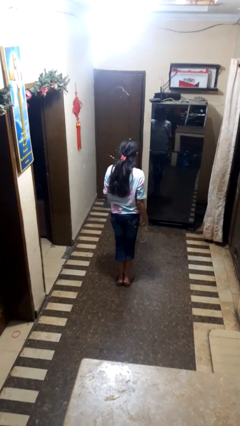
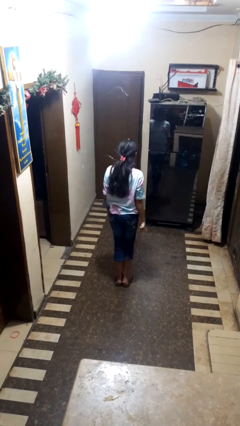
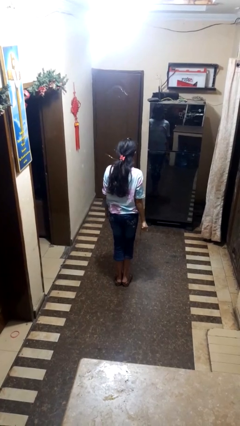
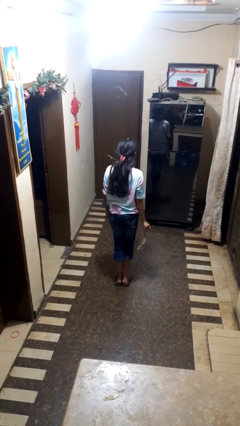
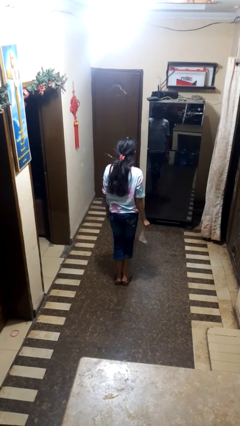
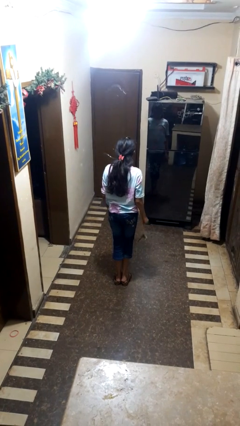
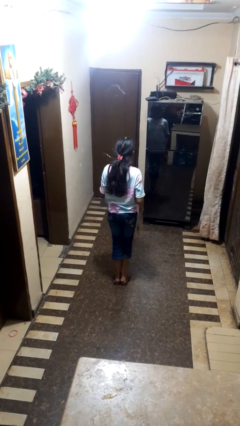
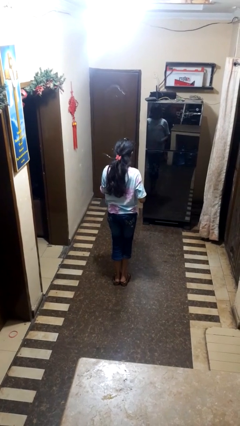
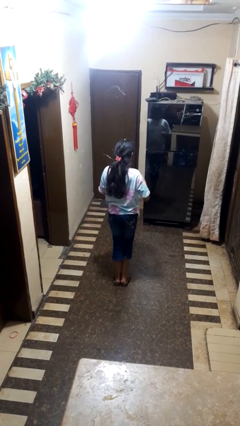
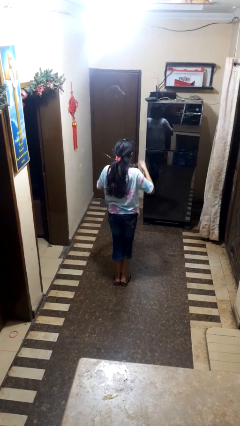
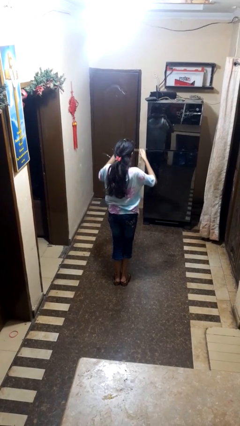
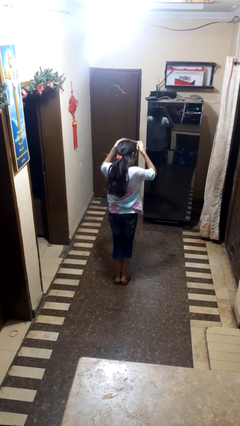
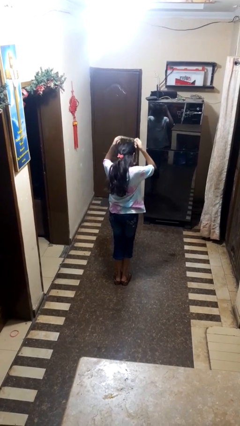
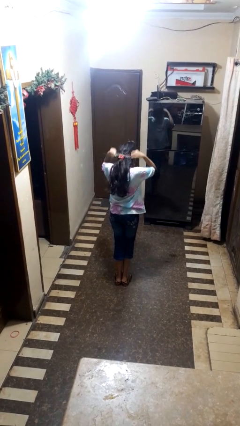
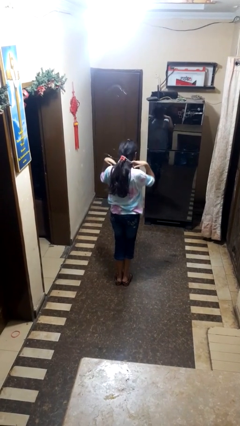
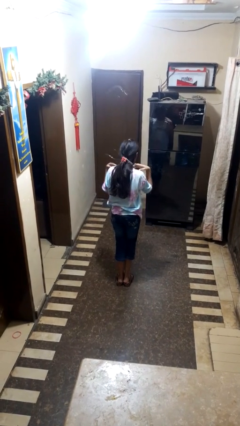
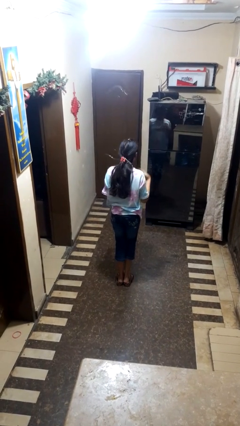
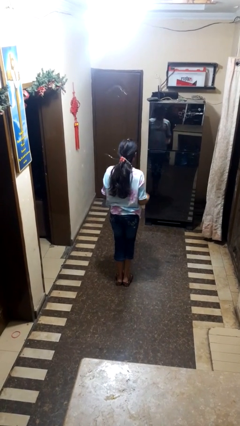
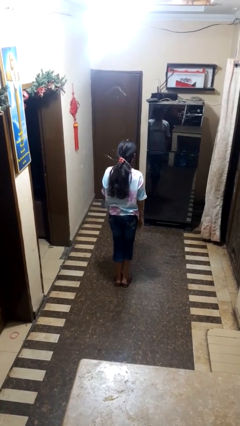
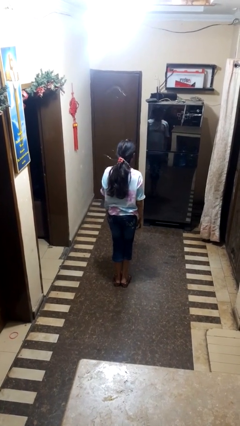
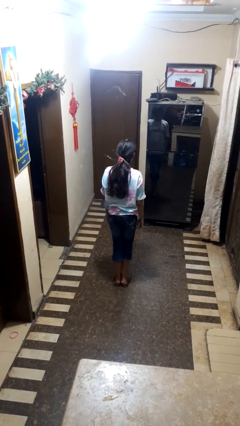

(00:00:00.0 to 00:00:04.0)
person puts on necklace

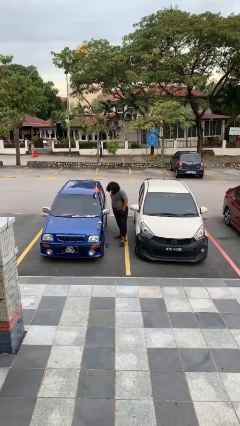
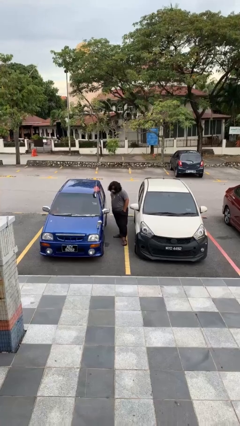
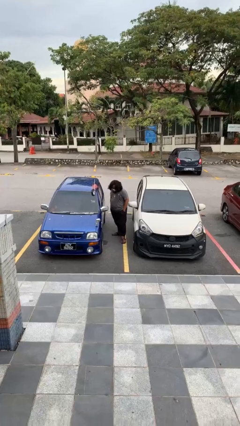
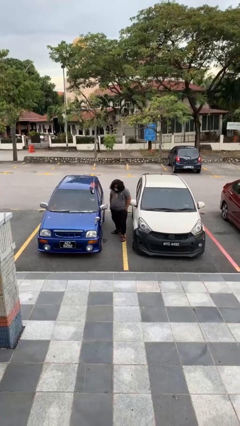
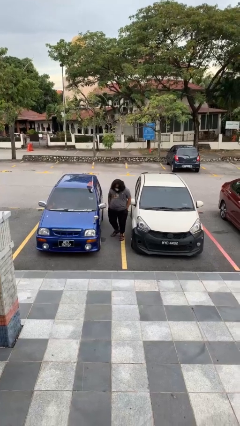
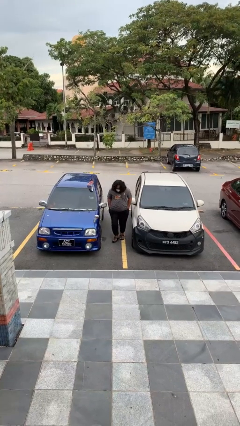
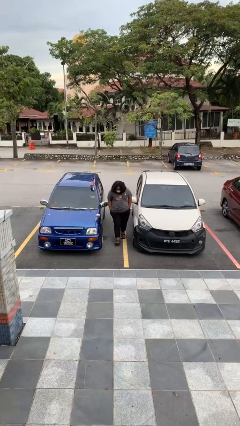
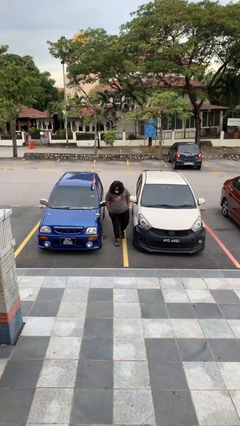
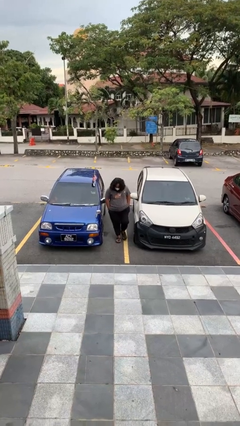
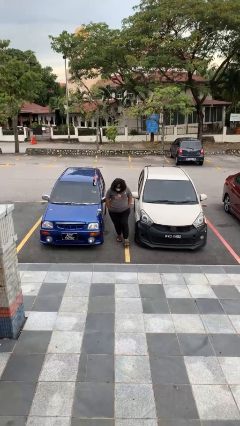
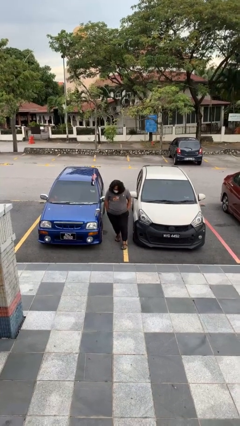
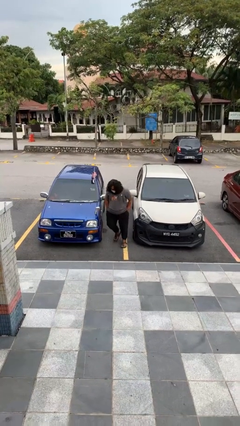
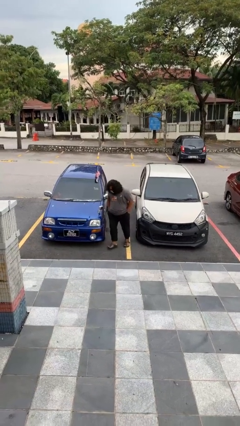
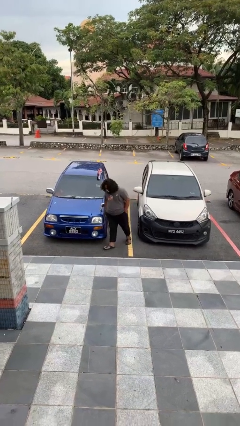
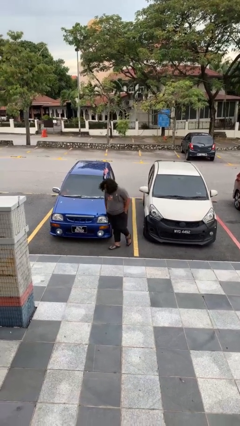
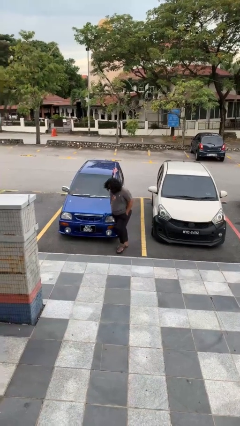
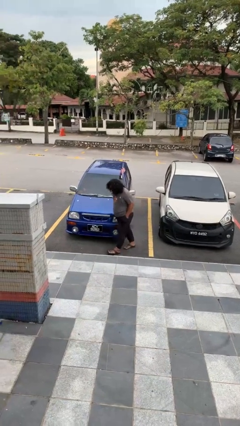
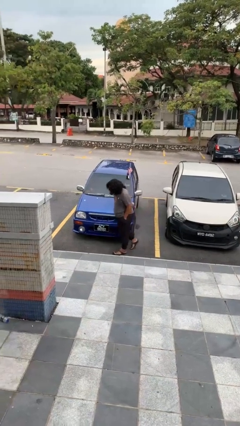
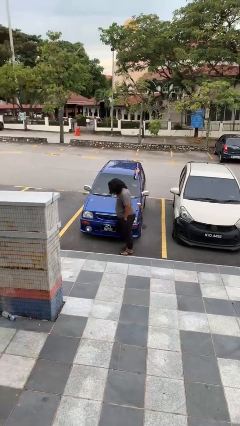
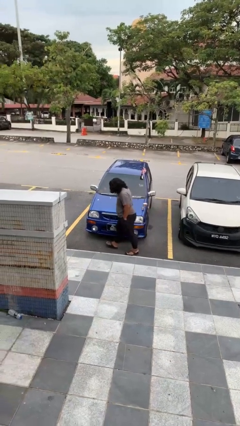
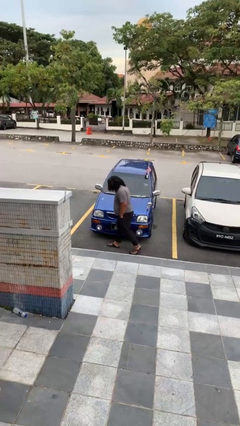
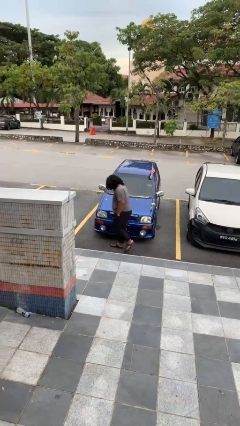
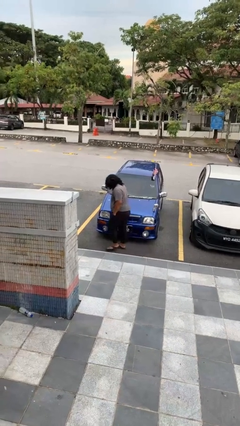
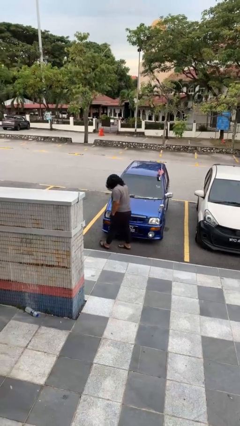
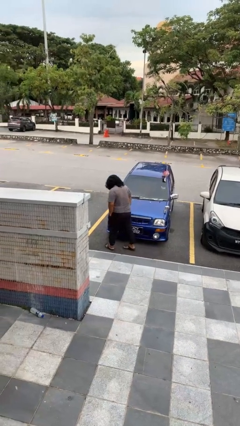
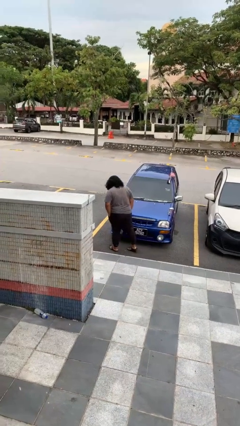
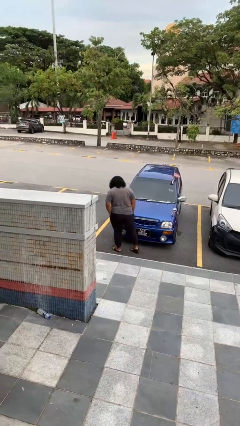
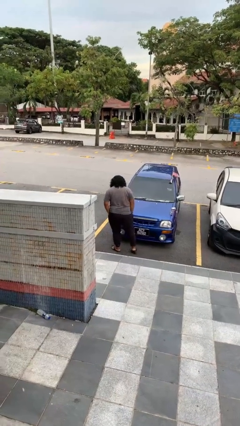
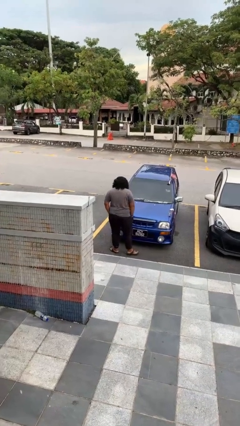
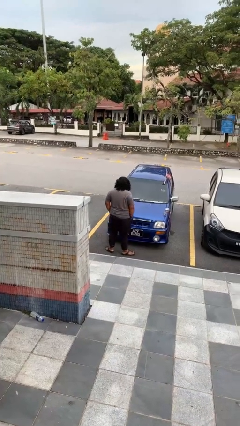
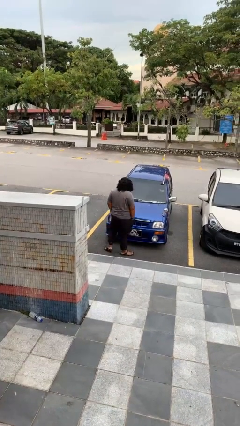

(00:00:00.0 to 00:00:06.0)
person walks around car

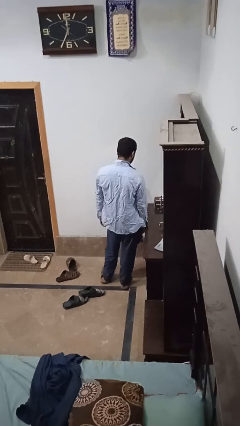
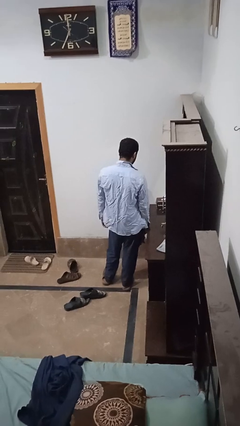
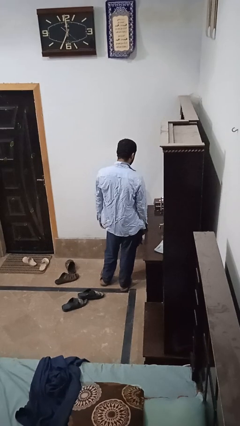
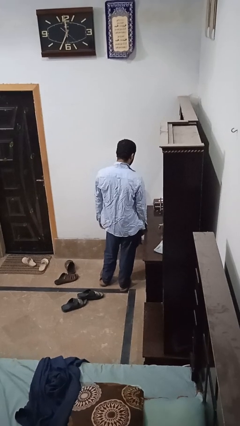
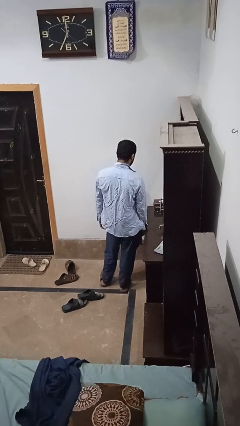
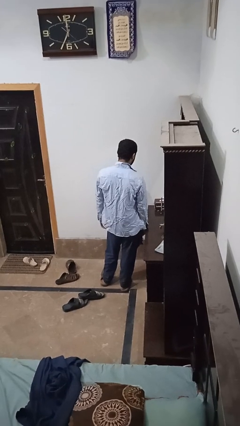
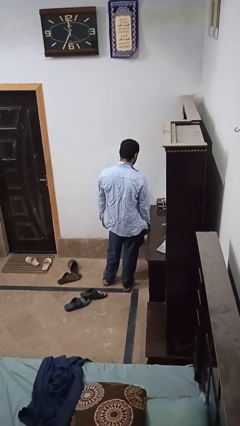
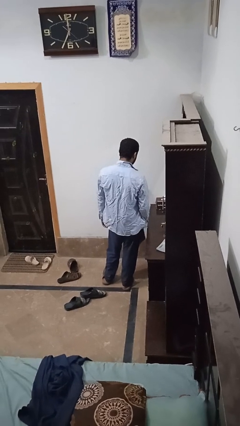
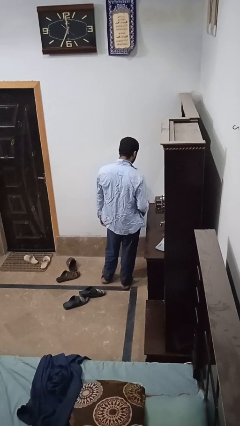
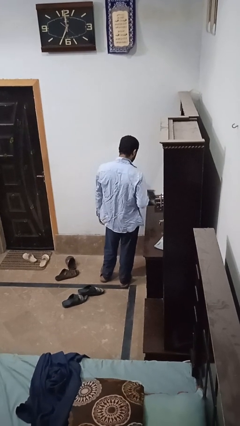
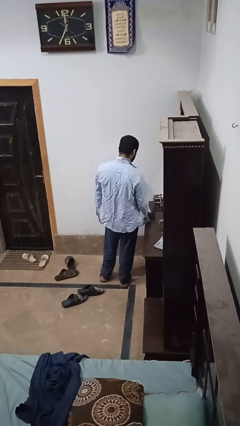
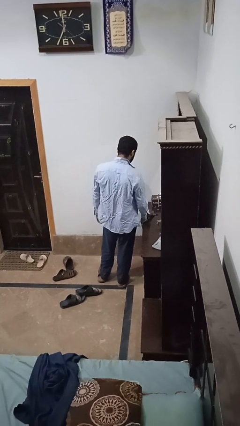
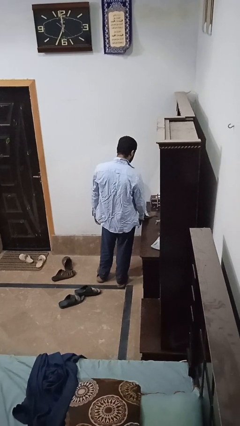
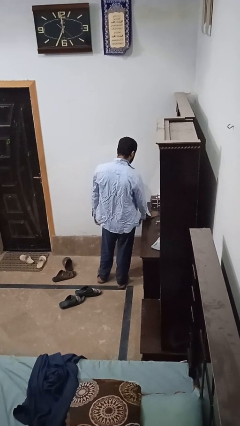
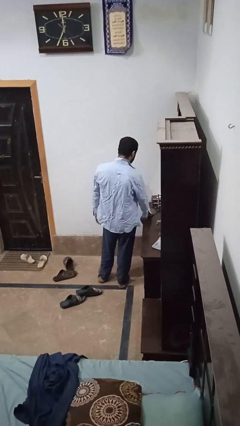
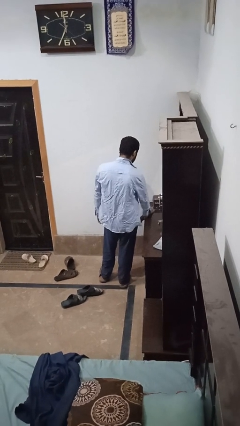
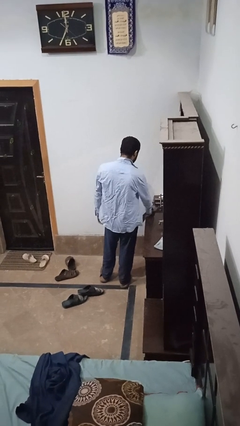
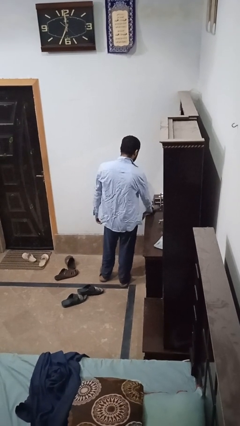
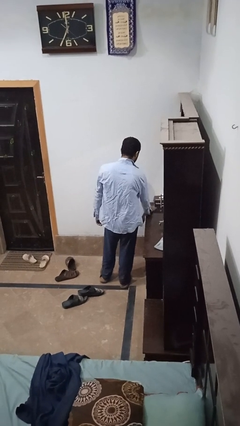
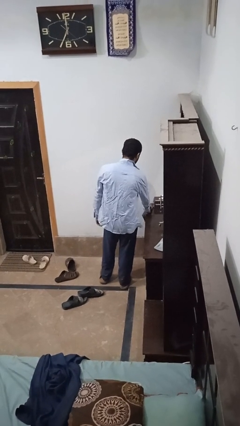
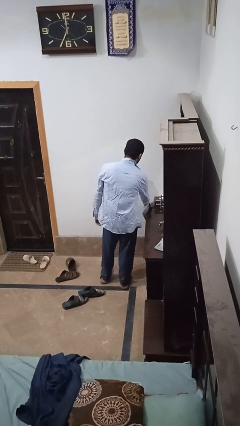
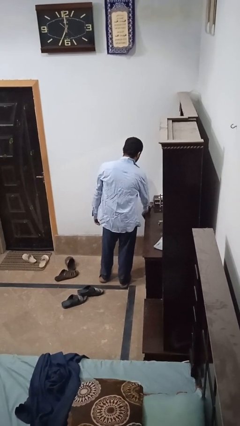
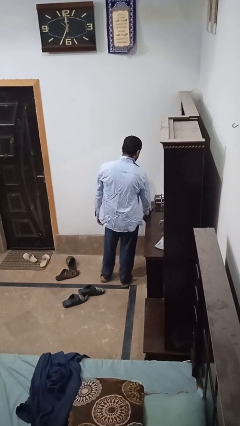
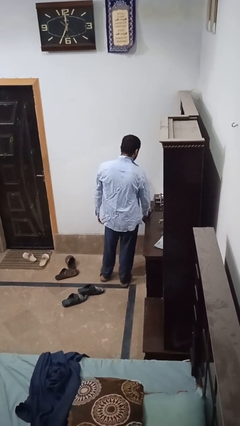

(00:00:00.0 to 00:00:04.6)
person cleans table with rag

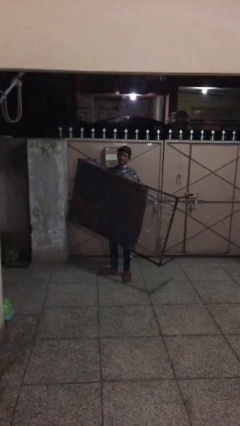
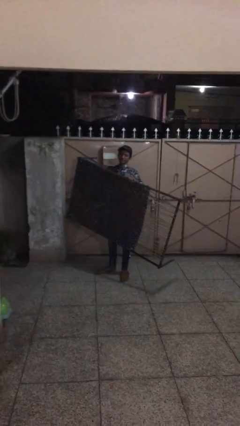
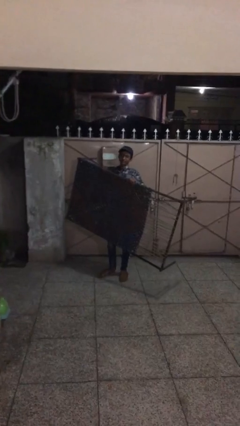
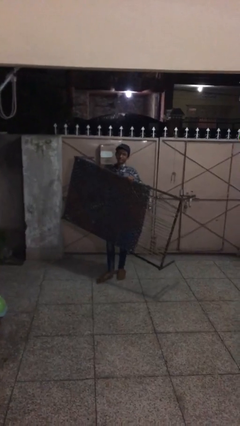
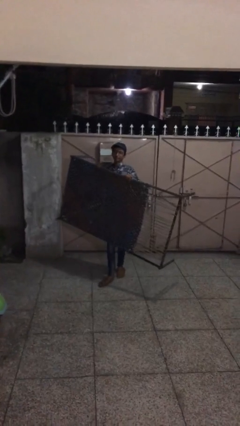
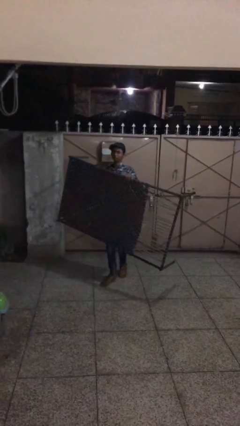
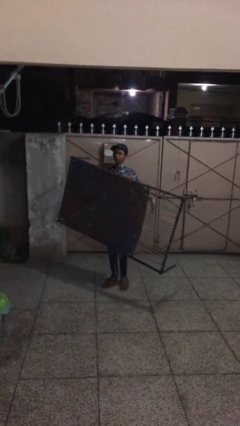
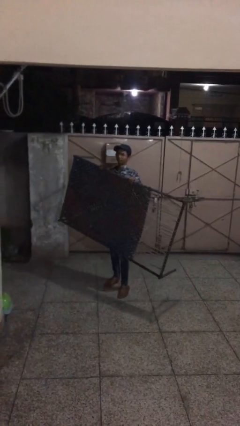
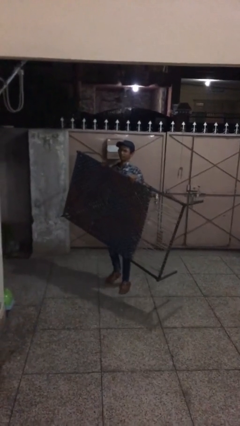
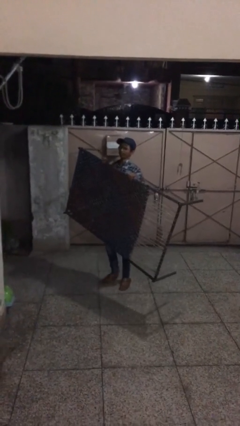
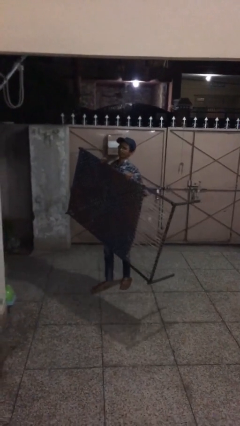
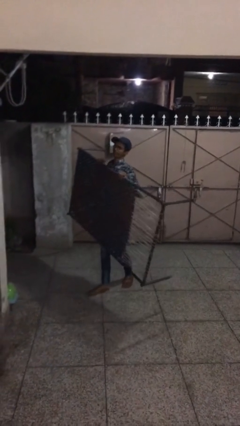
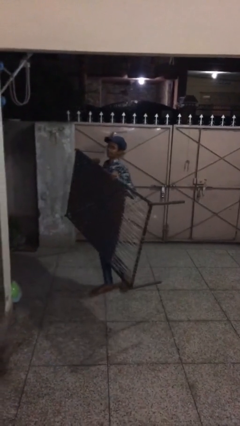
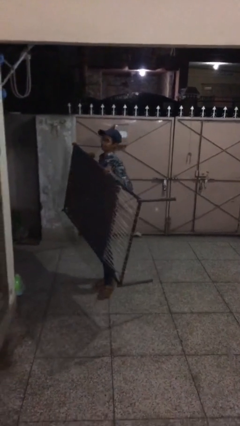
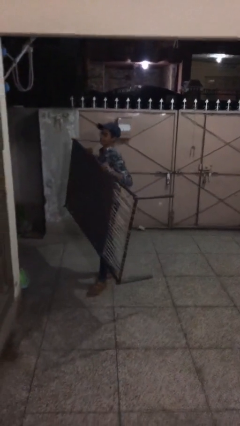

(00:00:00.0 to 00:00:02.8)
person carries heavy object

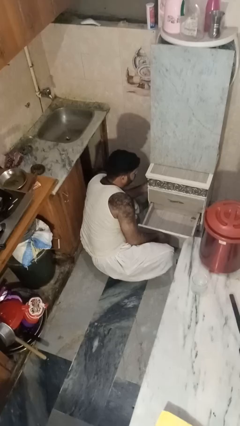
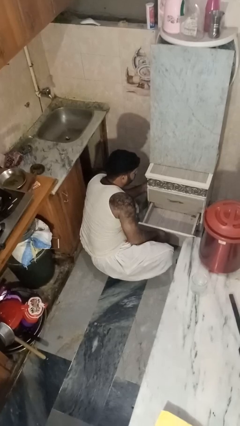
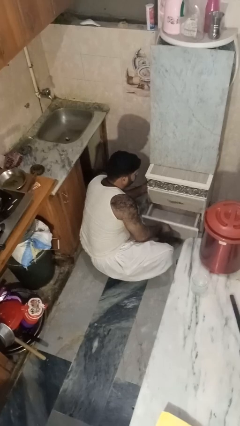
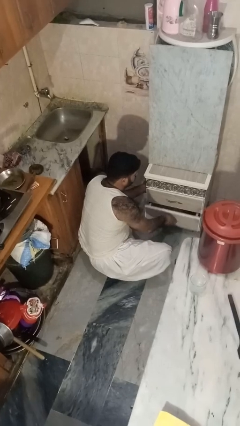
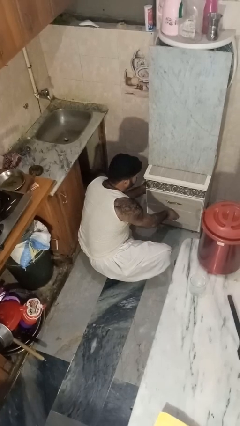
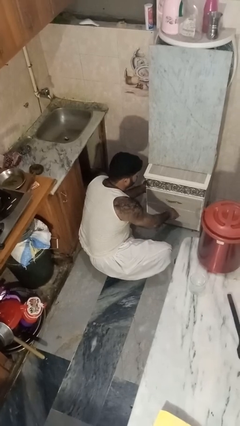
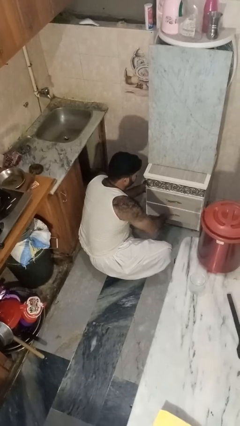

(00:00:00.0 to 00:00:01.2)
person closes kitchen drawer
